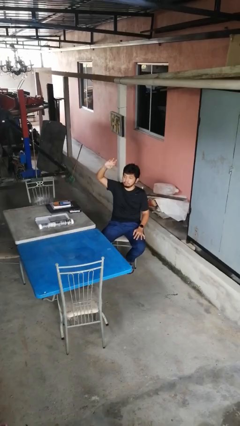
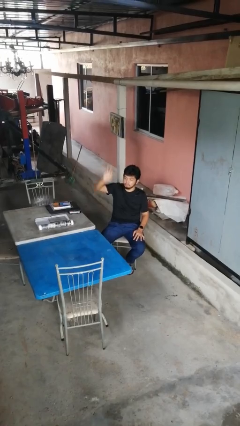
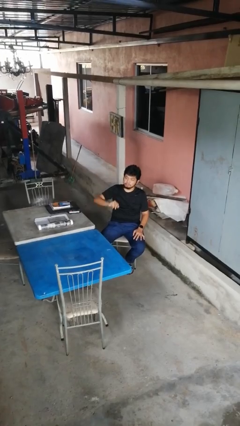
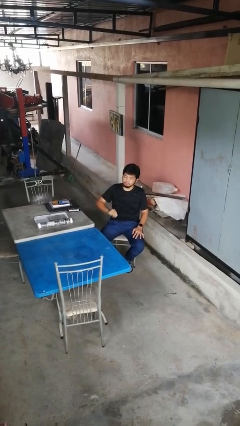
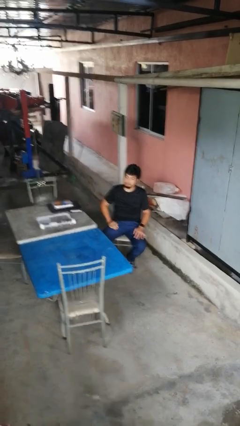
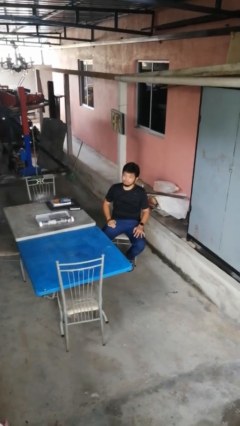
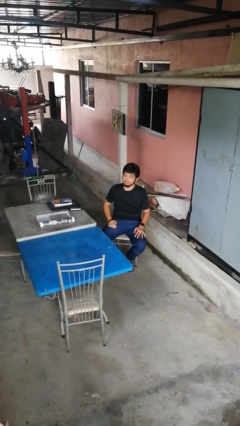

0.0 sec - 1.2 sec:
person gestures swipe down

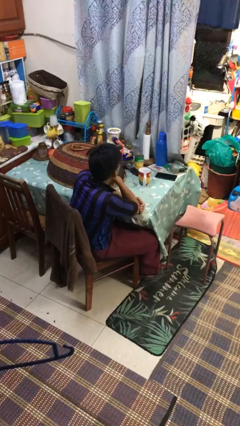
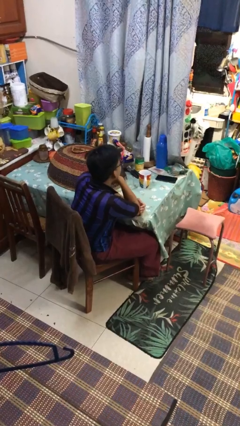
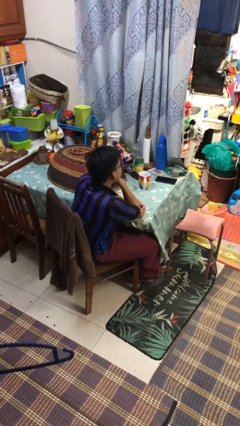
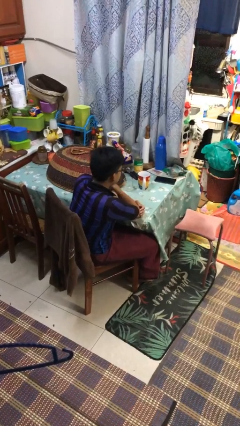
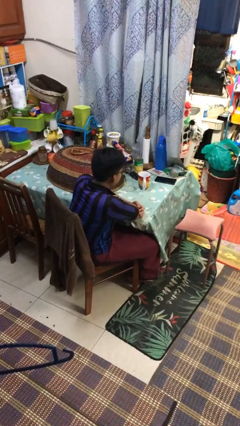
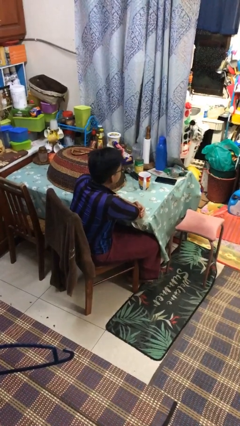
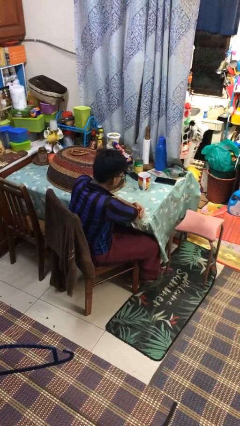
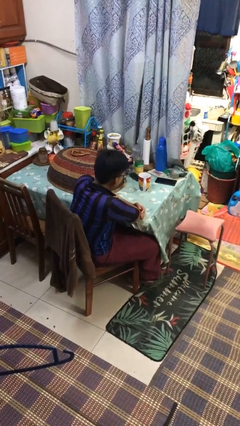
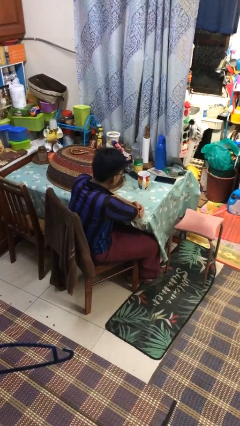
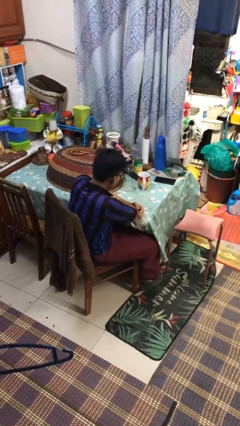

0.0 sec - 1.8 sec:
person nods head

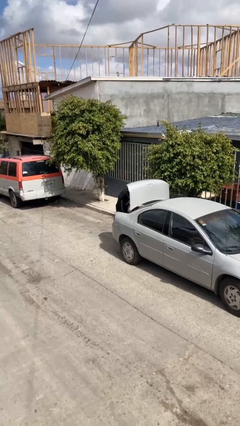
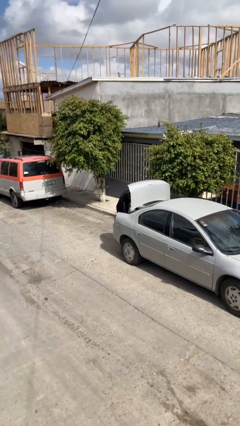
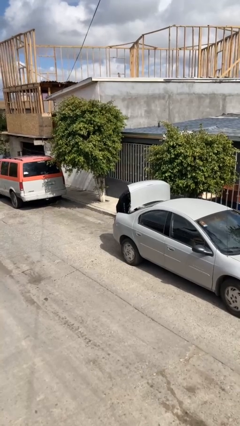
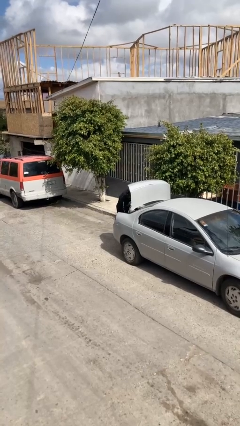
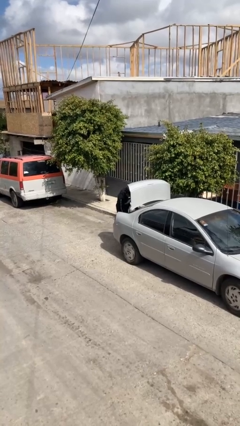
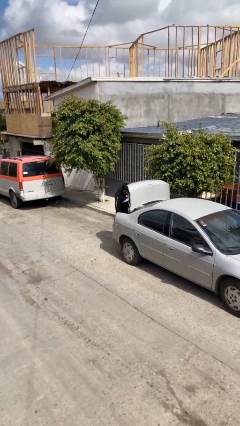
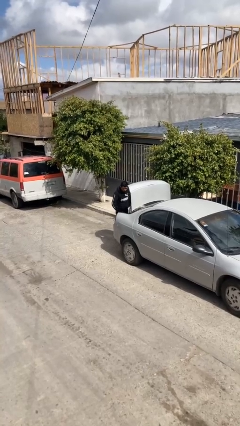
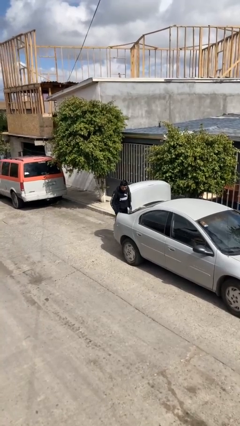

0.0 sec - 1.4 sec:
person loads car

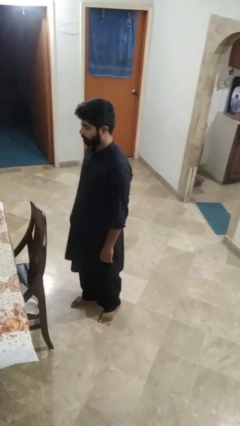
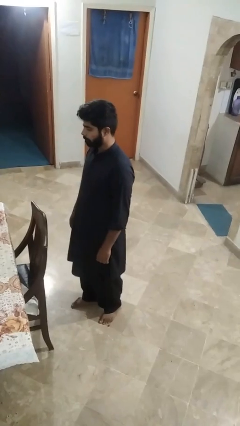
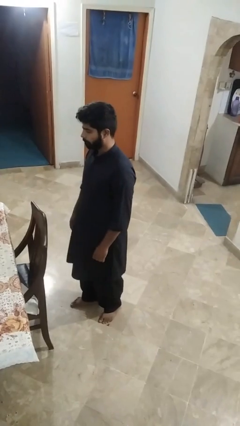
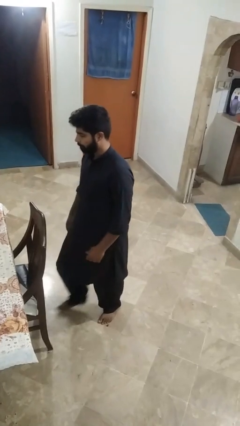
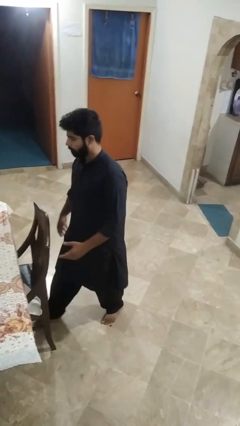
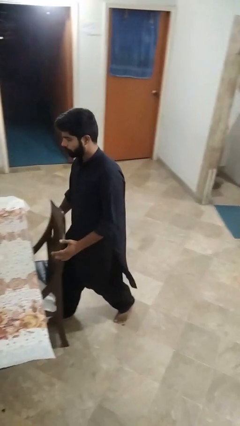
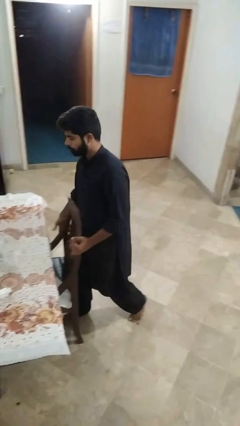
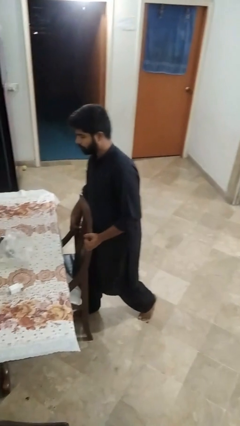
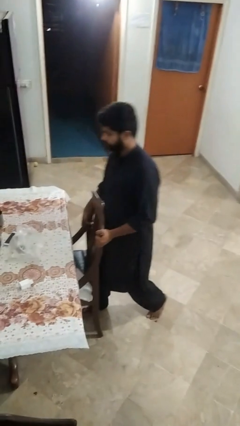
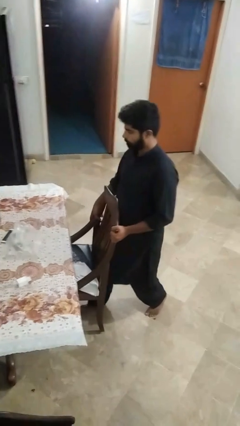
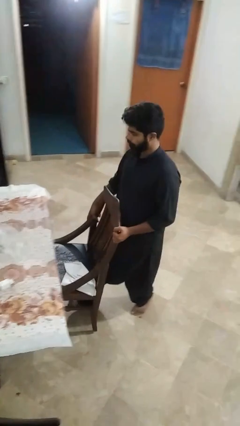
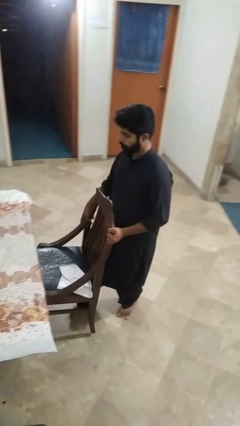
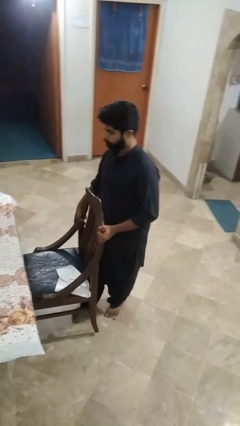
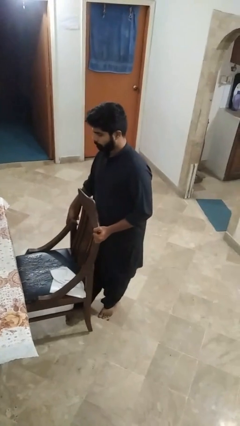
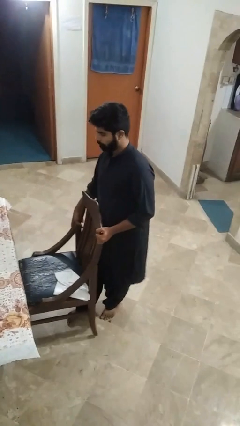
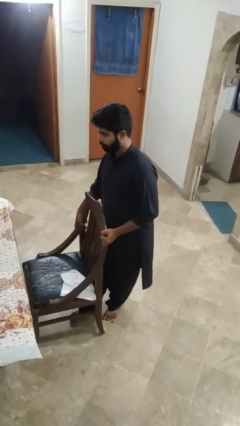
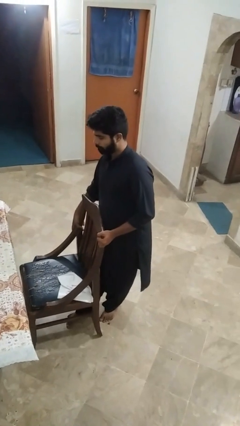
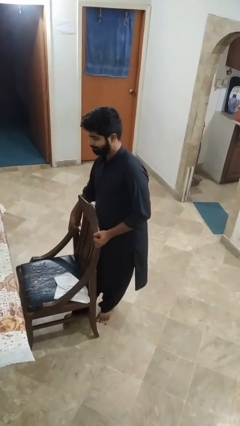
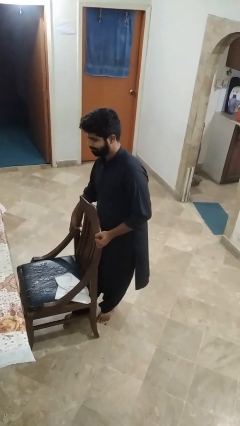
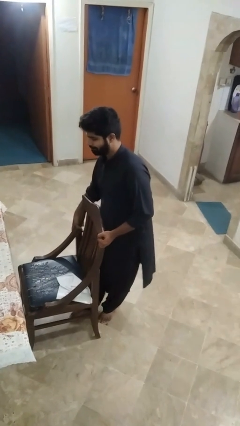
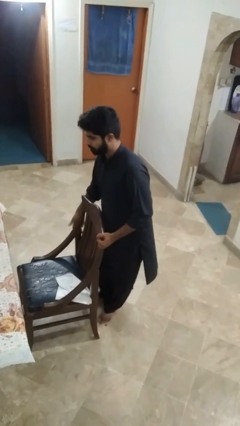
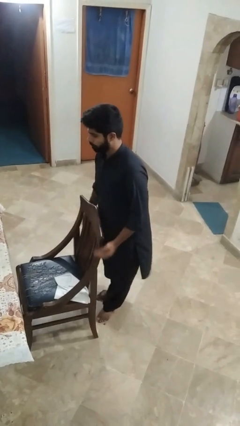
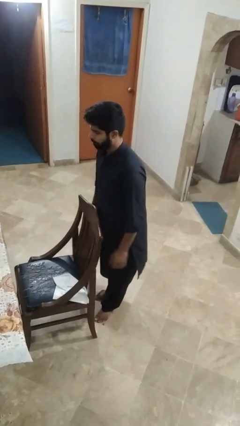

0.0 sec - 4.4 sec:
person pulls out chair

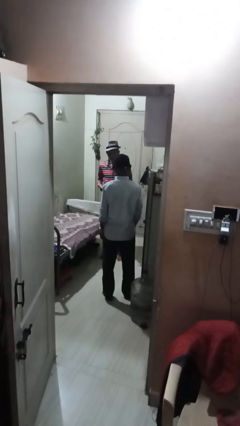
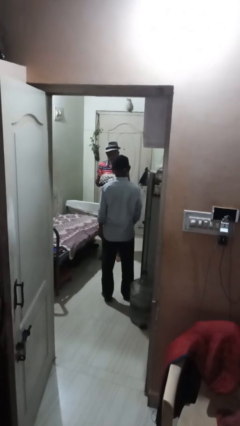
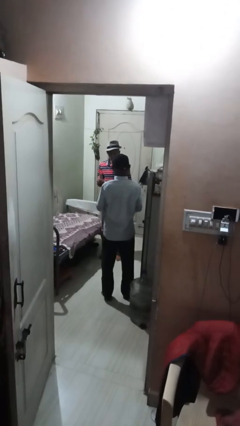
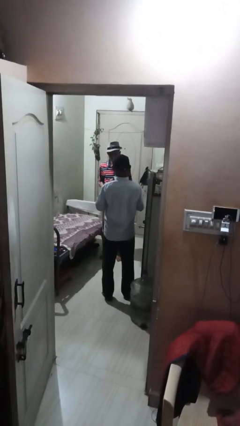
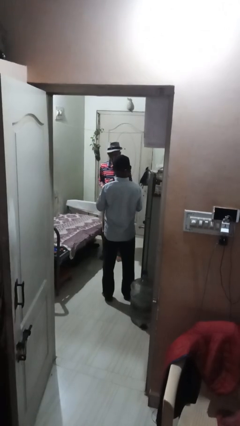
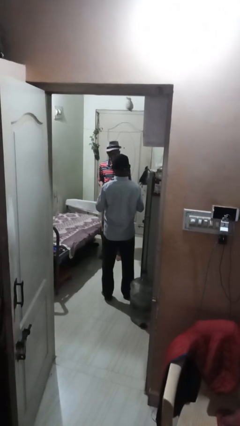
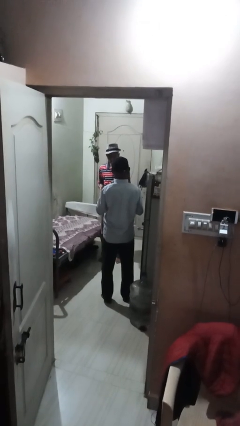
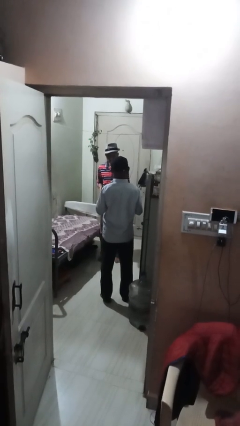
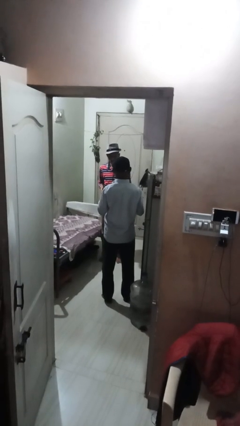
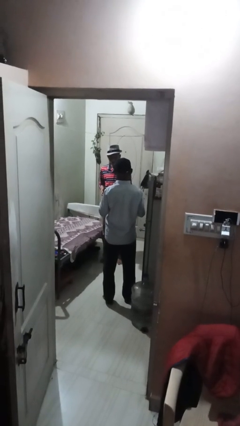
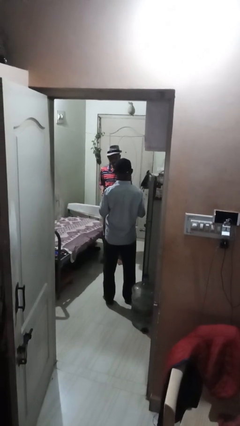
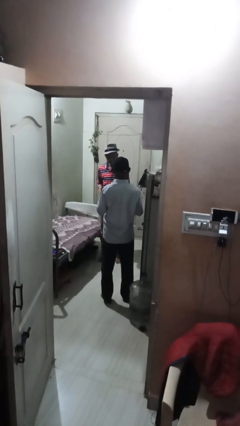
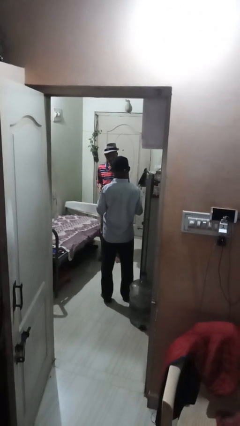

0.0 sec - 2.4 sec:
person catches object from person

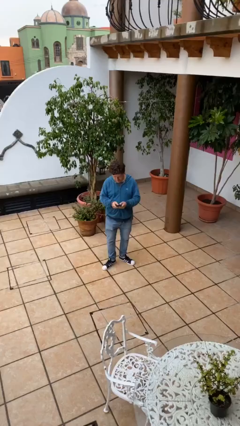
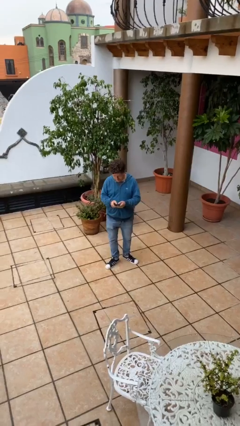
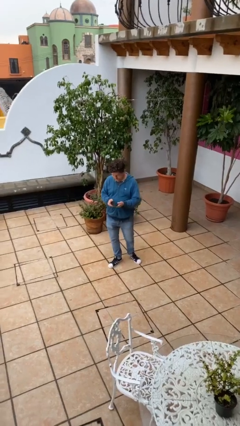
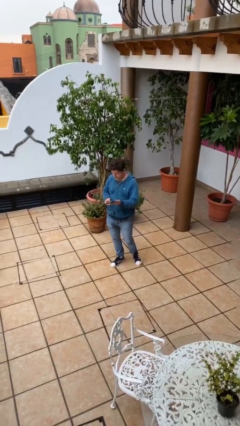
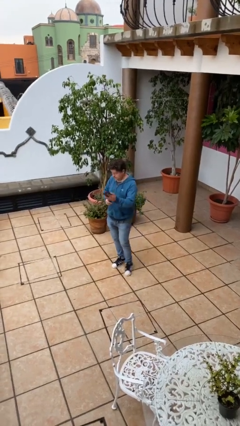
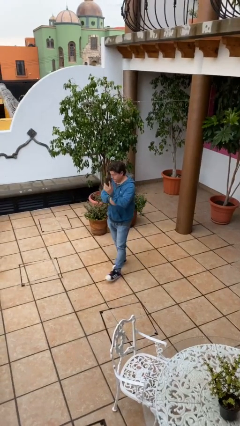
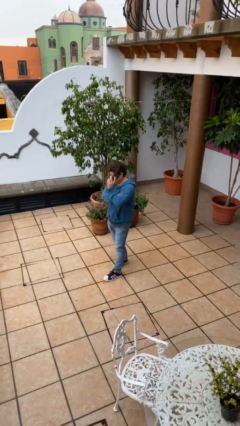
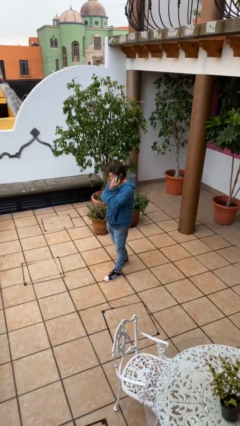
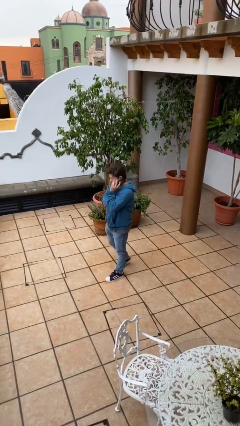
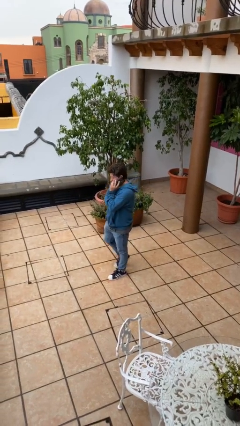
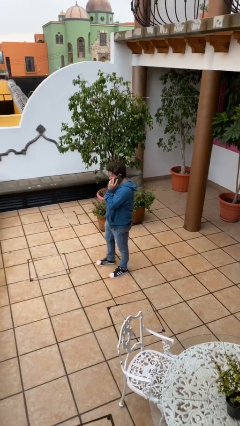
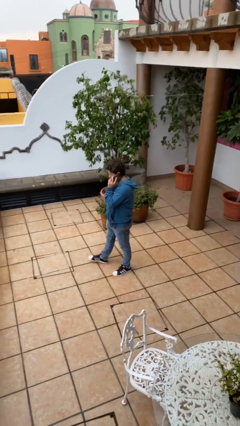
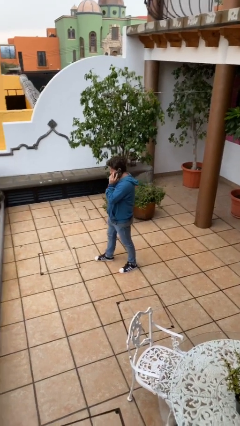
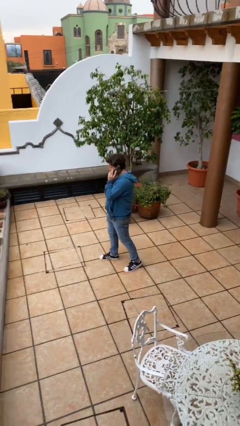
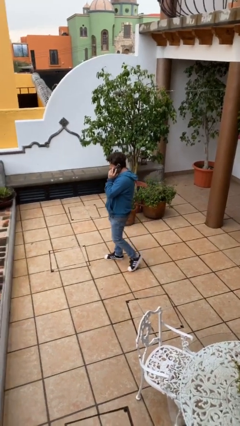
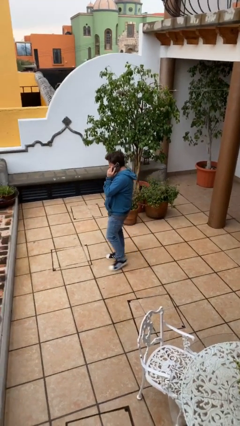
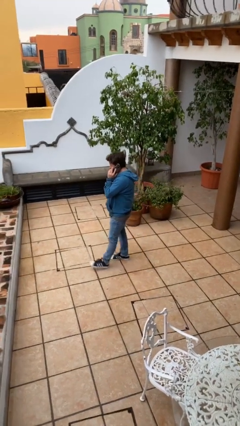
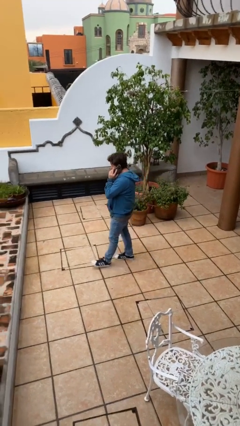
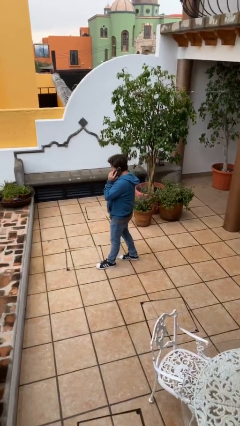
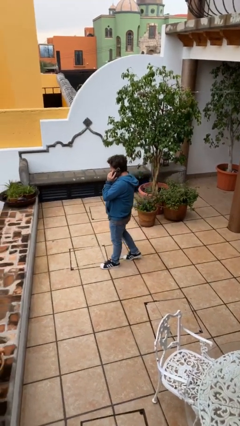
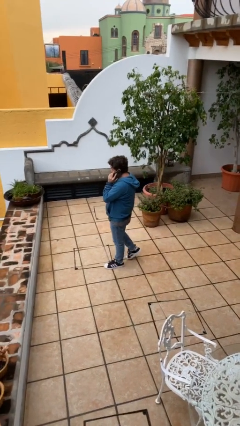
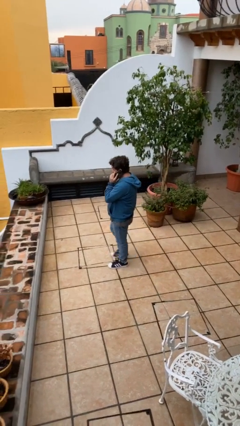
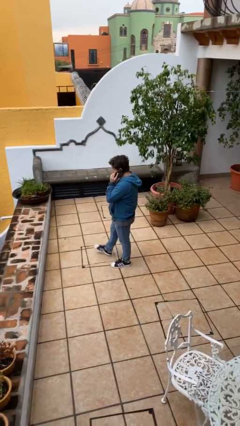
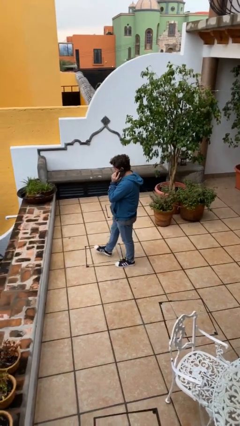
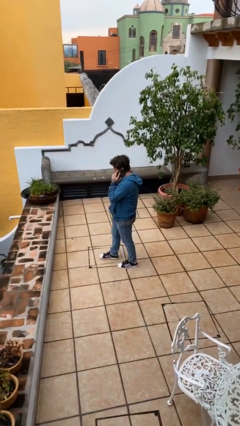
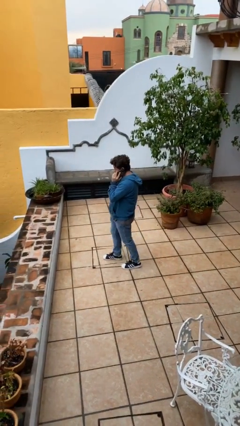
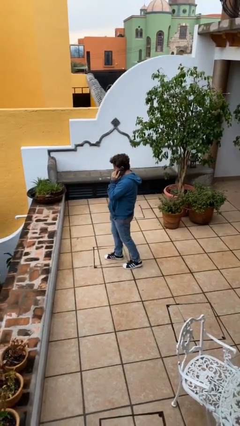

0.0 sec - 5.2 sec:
person talks on phone

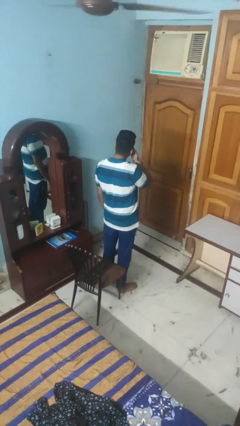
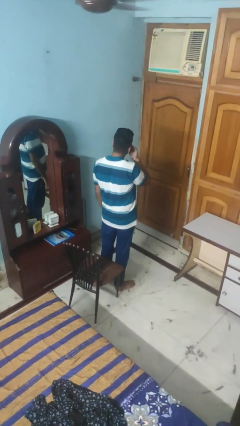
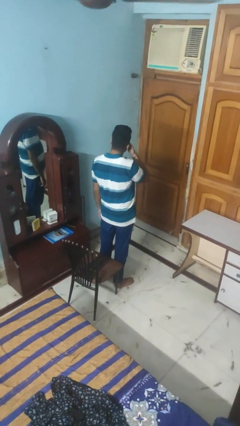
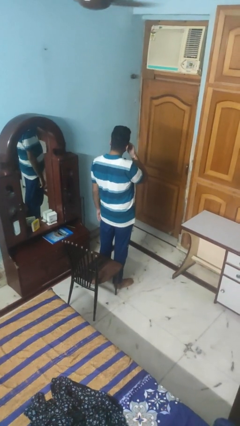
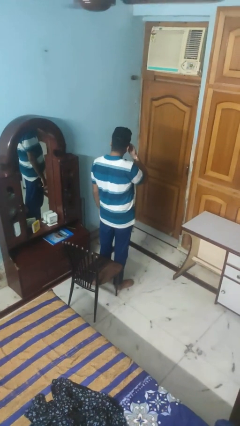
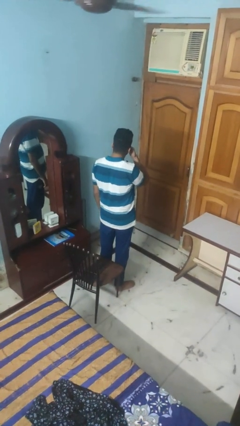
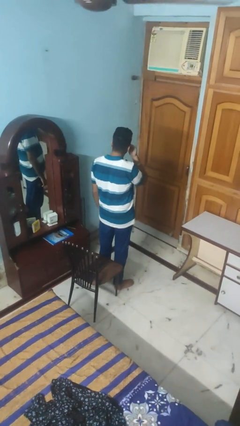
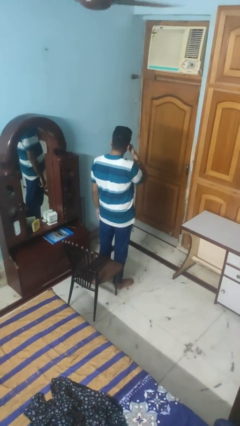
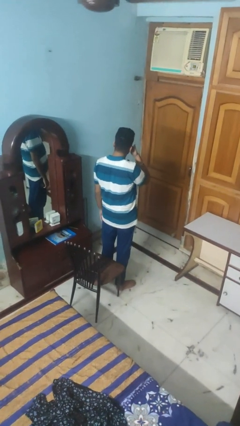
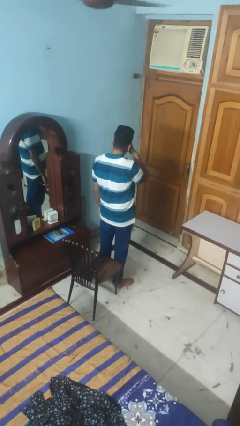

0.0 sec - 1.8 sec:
person rubs eyes
